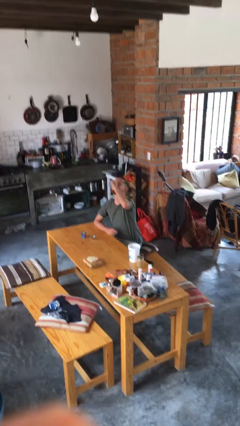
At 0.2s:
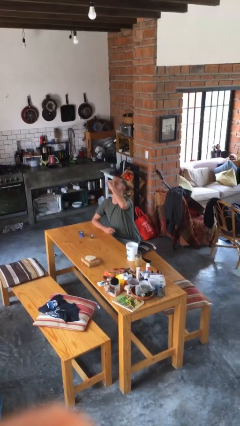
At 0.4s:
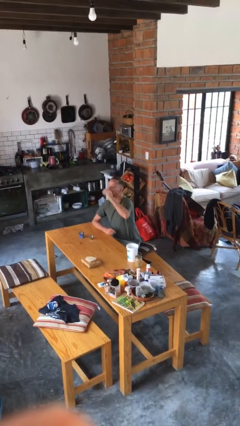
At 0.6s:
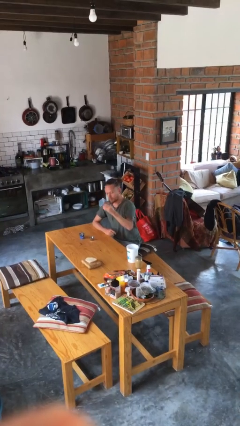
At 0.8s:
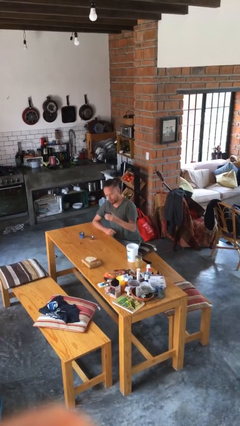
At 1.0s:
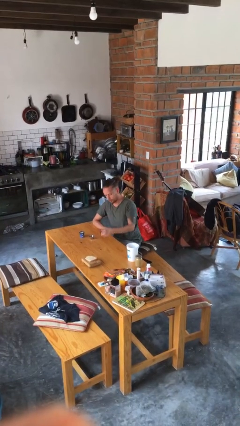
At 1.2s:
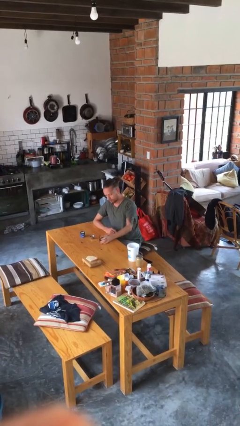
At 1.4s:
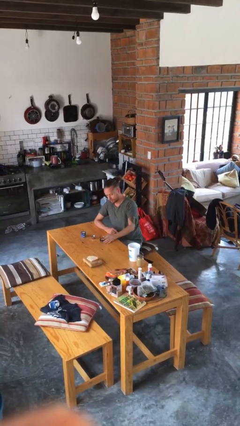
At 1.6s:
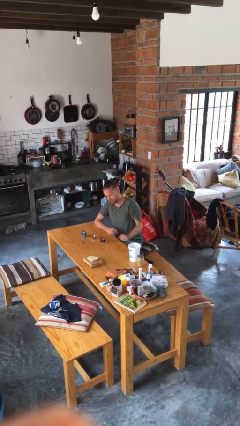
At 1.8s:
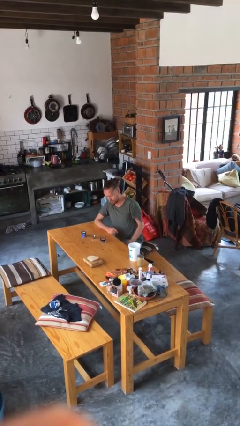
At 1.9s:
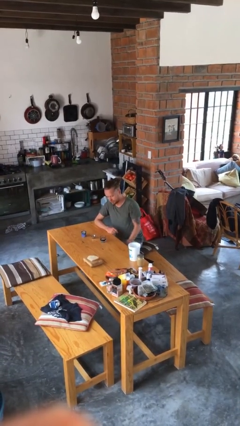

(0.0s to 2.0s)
person puts down object on table

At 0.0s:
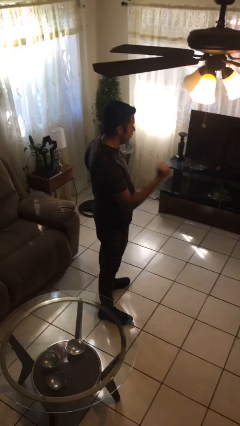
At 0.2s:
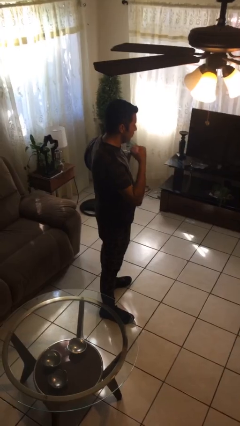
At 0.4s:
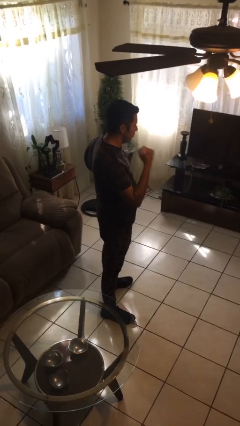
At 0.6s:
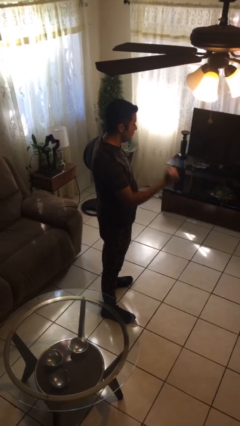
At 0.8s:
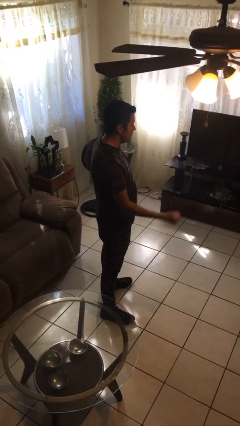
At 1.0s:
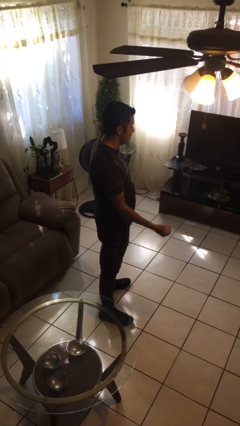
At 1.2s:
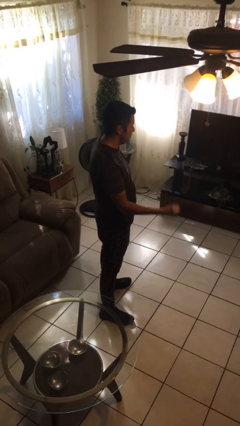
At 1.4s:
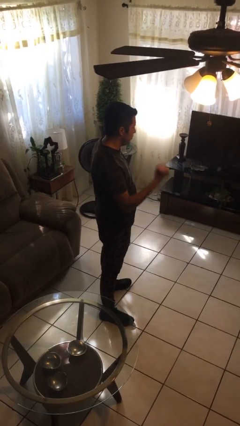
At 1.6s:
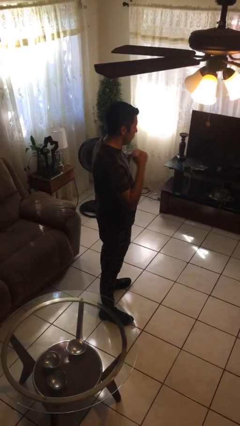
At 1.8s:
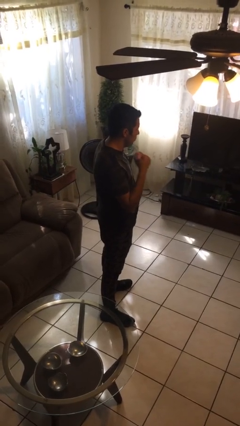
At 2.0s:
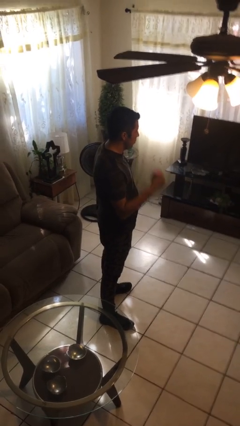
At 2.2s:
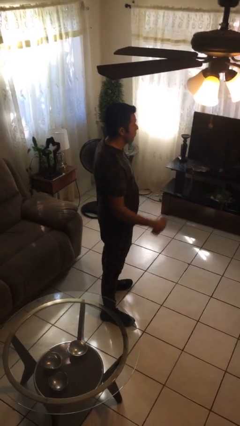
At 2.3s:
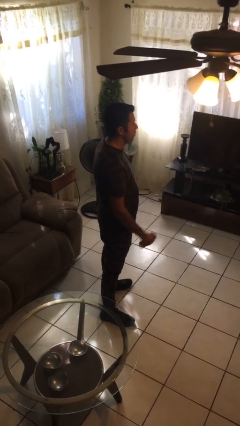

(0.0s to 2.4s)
person lifts dumbbells

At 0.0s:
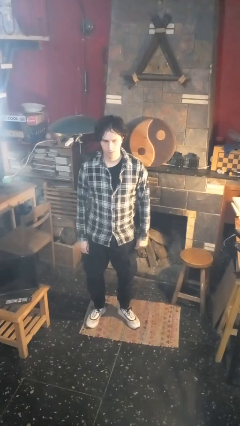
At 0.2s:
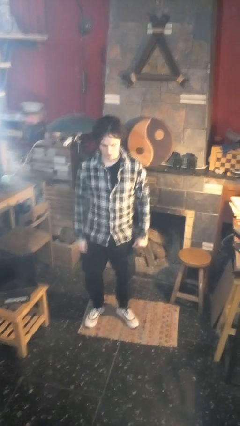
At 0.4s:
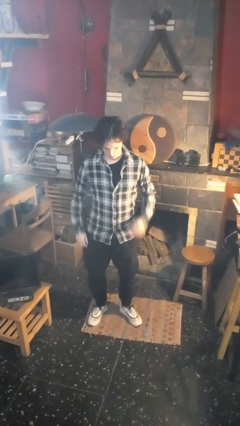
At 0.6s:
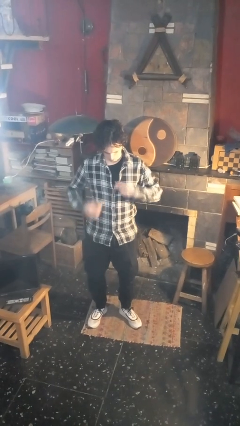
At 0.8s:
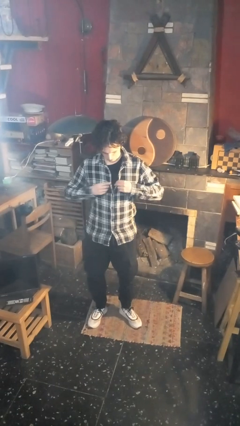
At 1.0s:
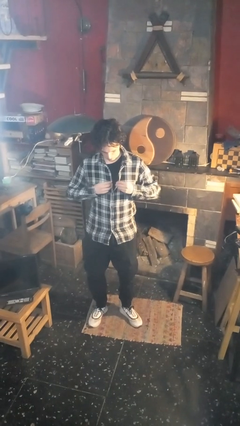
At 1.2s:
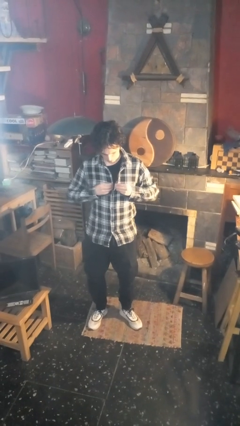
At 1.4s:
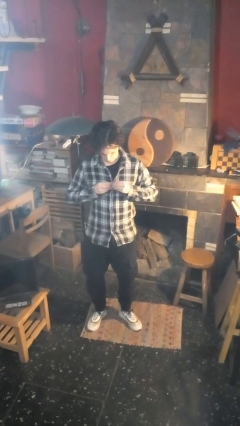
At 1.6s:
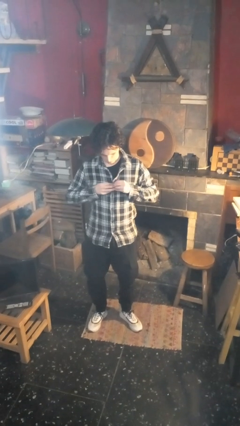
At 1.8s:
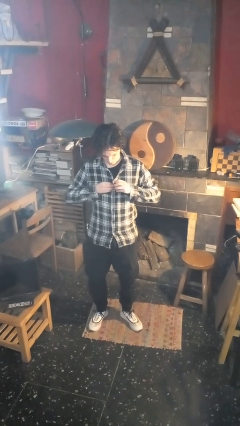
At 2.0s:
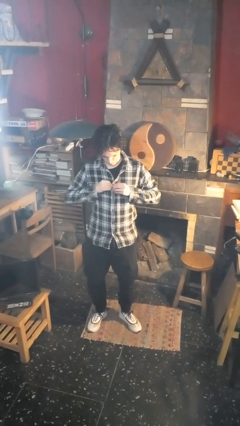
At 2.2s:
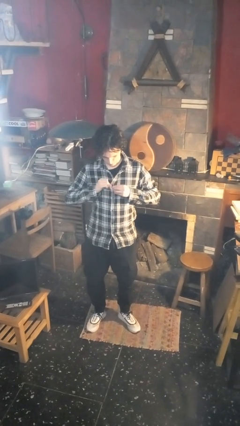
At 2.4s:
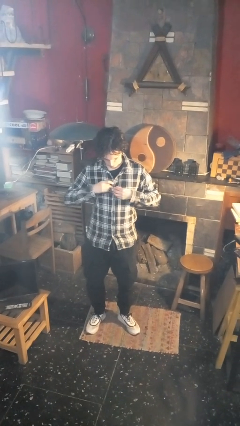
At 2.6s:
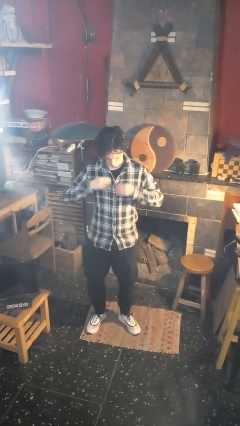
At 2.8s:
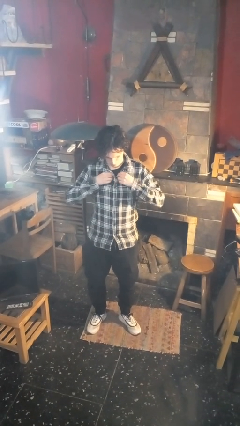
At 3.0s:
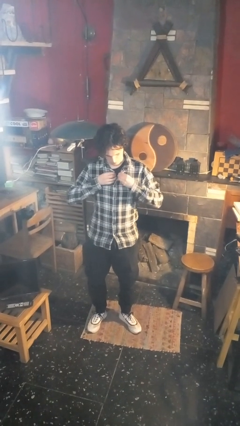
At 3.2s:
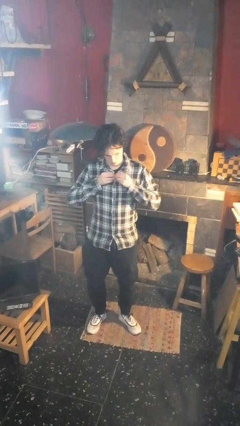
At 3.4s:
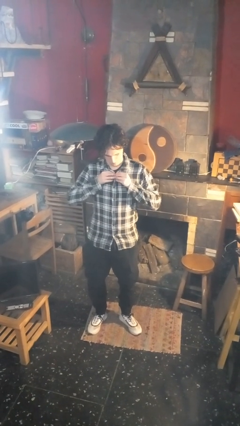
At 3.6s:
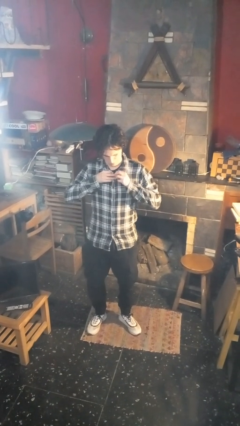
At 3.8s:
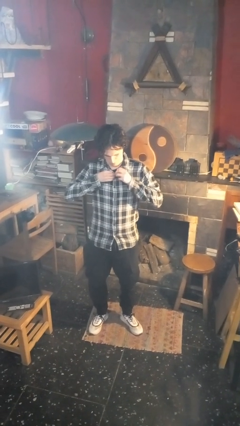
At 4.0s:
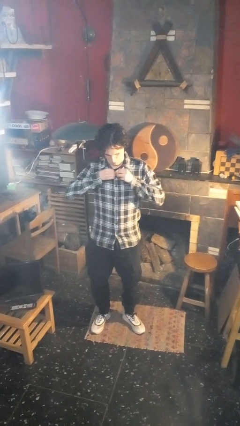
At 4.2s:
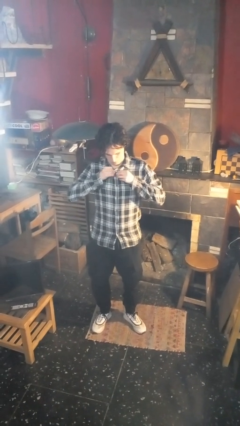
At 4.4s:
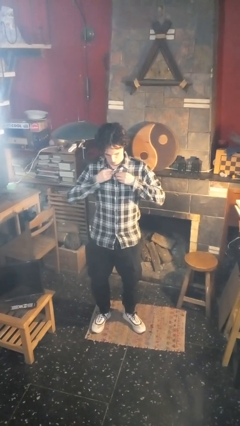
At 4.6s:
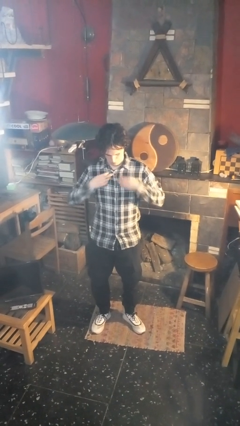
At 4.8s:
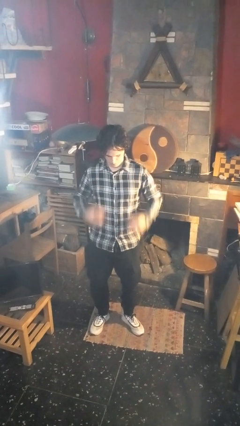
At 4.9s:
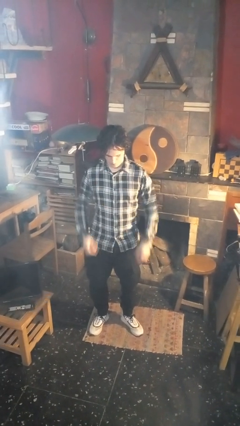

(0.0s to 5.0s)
person buttons shirt

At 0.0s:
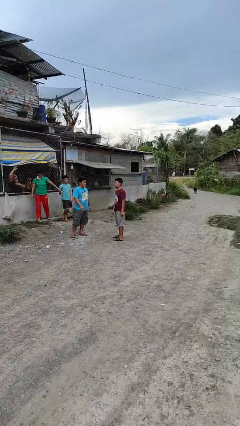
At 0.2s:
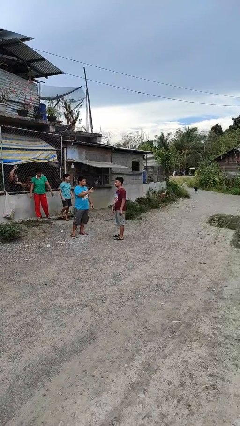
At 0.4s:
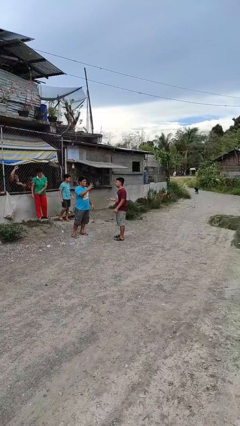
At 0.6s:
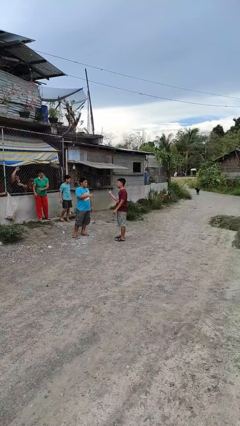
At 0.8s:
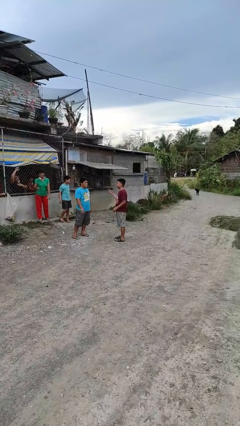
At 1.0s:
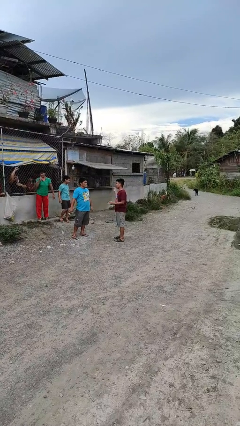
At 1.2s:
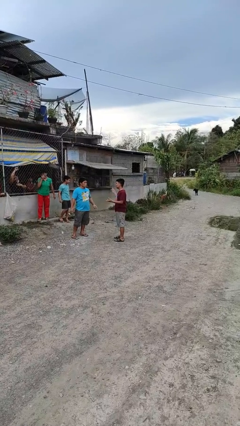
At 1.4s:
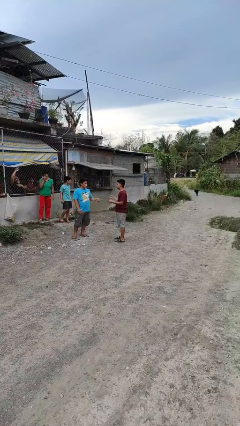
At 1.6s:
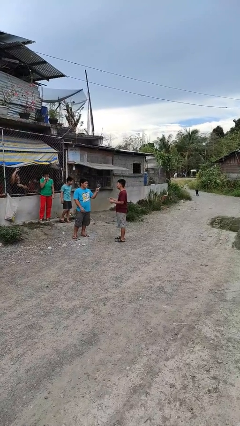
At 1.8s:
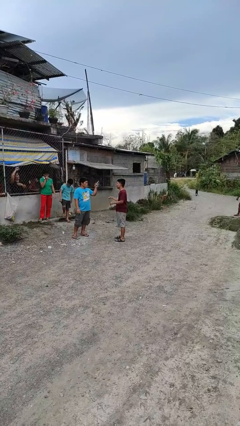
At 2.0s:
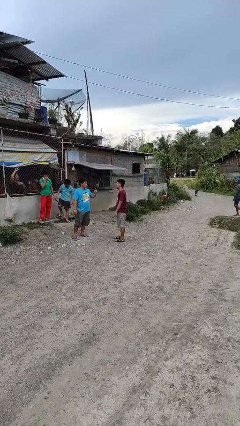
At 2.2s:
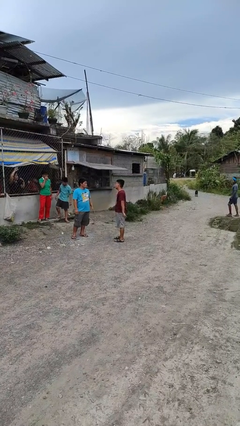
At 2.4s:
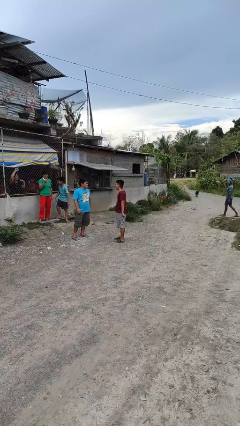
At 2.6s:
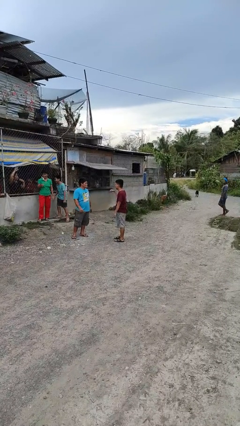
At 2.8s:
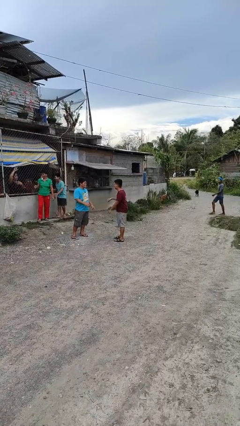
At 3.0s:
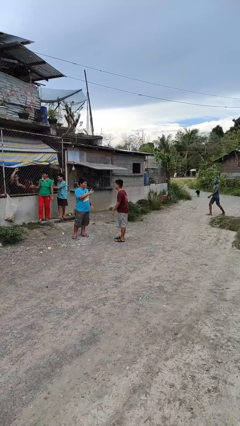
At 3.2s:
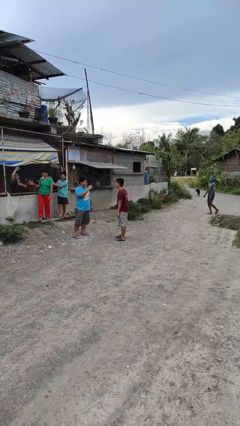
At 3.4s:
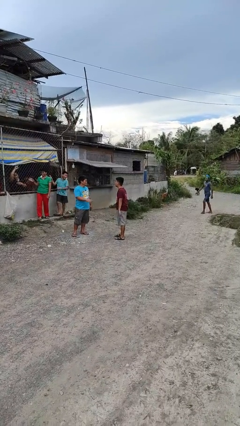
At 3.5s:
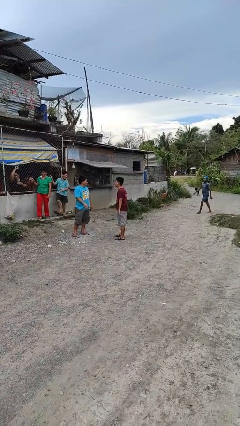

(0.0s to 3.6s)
person talks to person

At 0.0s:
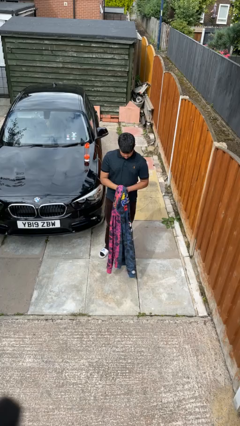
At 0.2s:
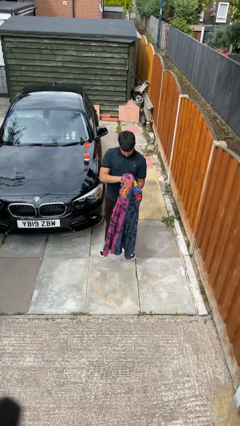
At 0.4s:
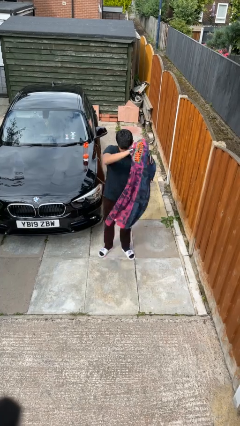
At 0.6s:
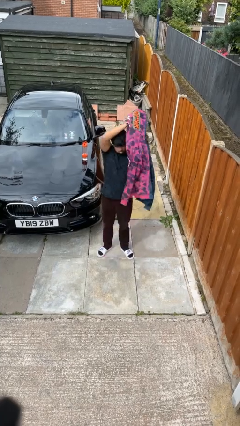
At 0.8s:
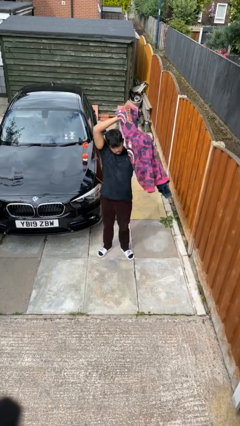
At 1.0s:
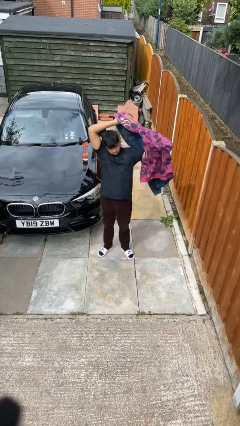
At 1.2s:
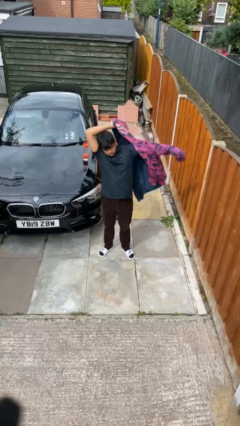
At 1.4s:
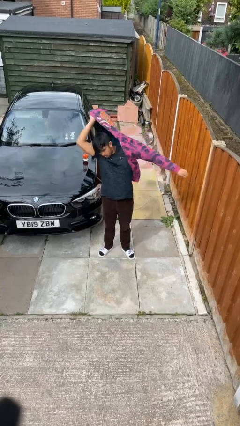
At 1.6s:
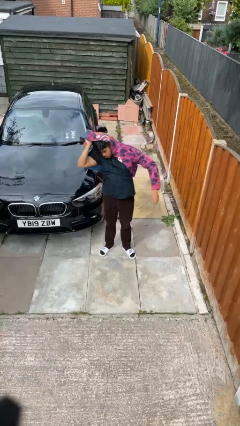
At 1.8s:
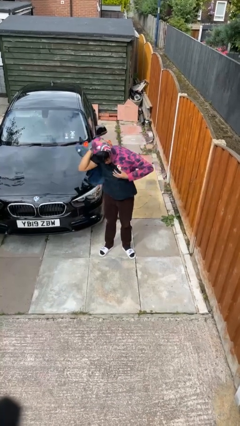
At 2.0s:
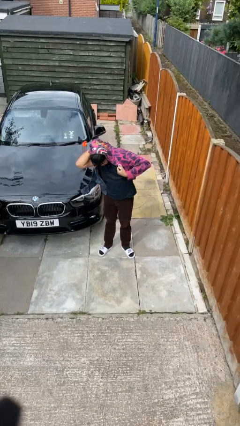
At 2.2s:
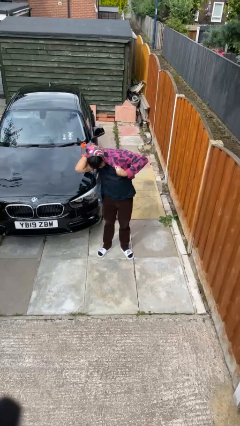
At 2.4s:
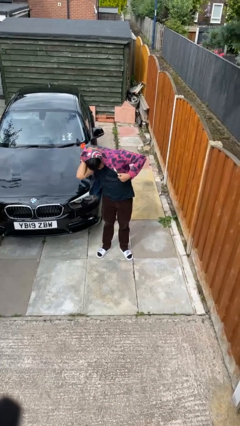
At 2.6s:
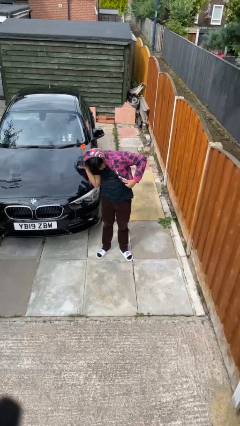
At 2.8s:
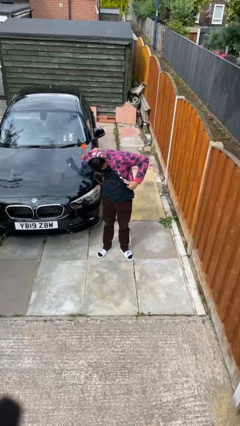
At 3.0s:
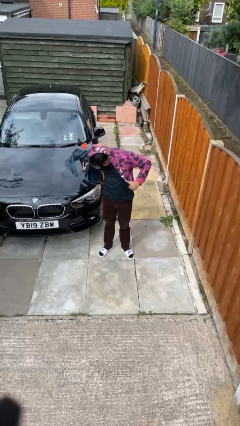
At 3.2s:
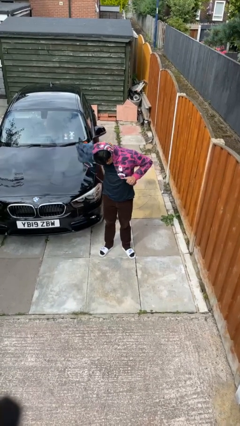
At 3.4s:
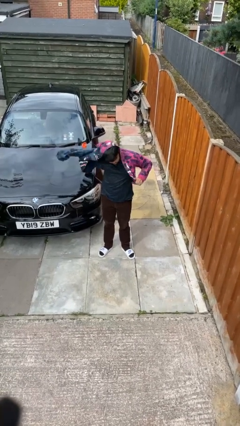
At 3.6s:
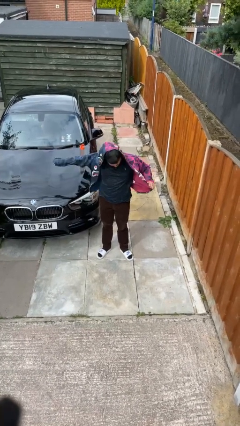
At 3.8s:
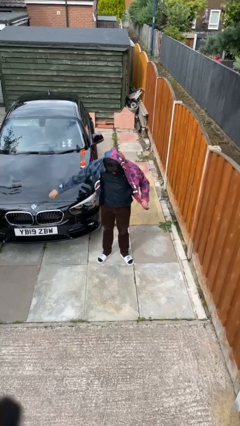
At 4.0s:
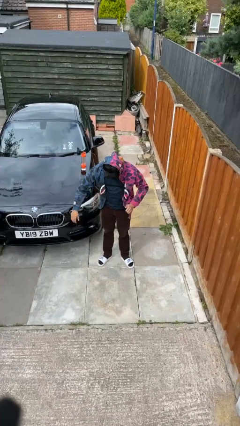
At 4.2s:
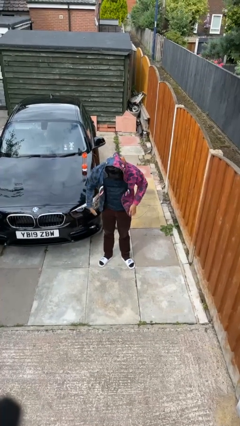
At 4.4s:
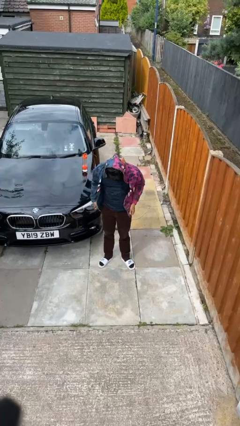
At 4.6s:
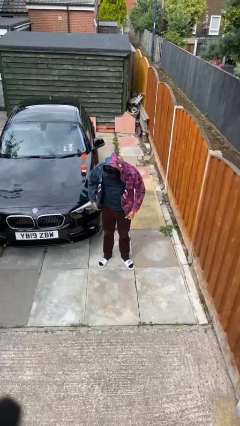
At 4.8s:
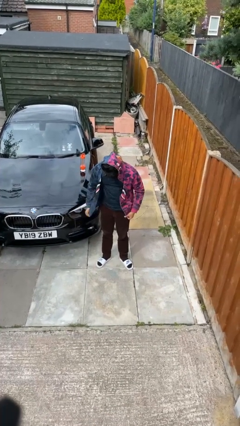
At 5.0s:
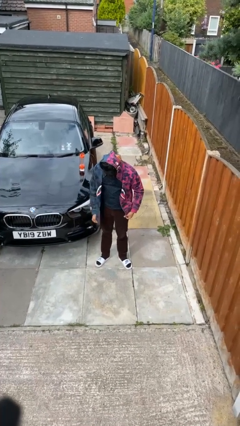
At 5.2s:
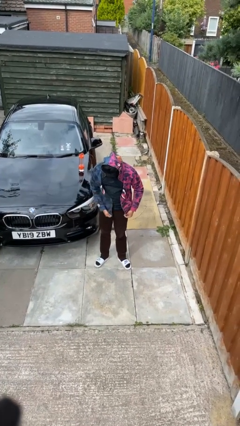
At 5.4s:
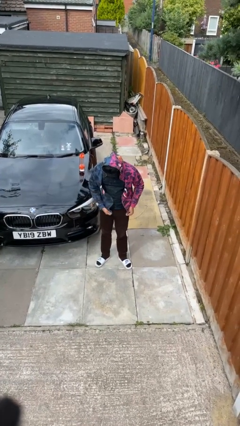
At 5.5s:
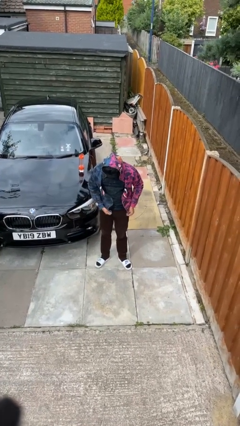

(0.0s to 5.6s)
person puts on jacket
